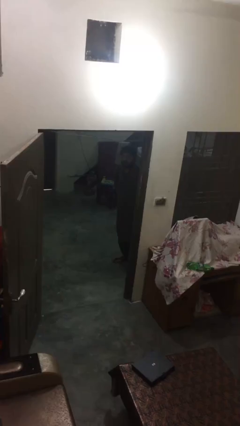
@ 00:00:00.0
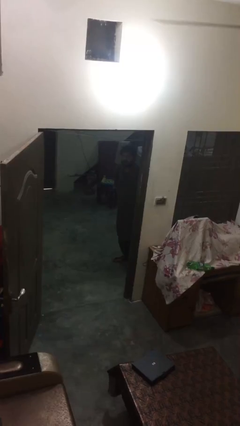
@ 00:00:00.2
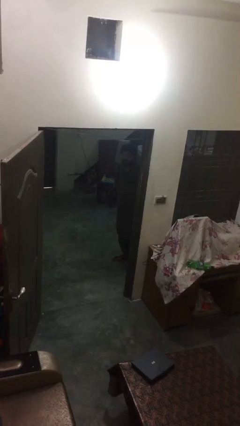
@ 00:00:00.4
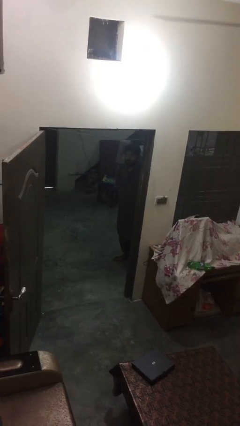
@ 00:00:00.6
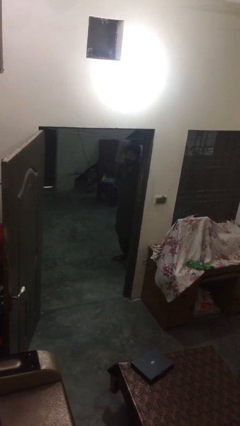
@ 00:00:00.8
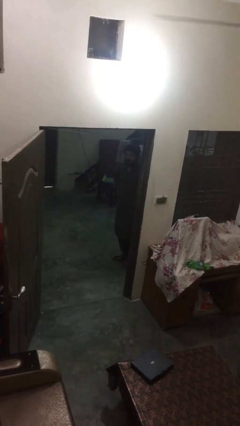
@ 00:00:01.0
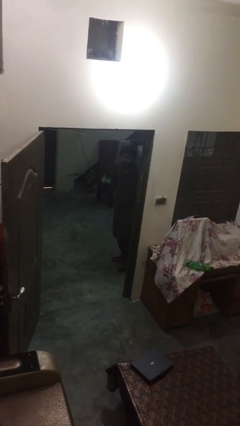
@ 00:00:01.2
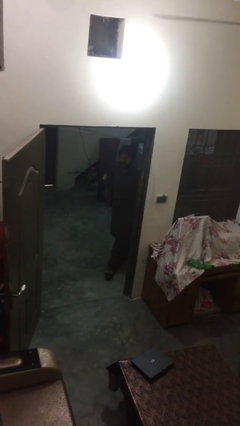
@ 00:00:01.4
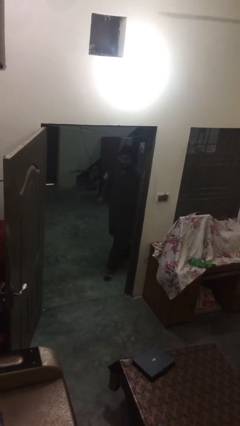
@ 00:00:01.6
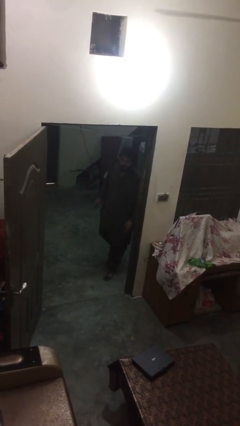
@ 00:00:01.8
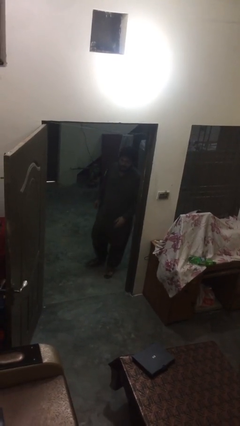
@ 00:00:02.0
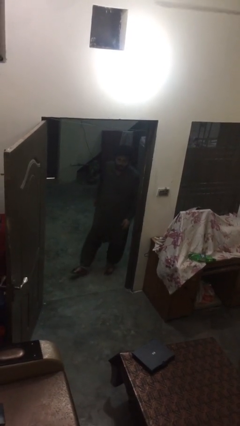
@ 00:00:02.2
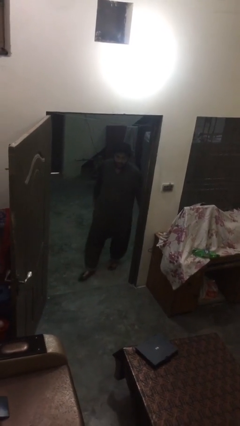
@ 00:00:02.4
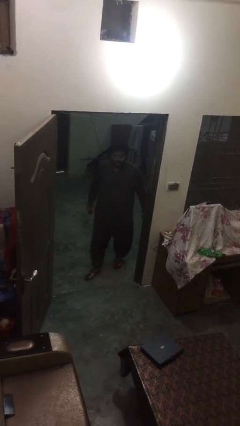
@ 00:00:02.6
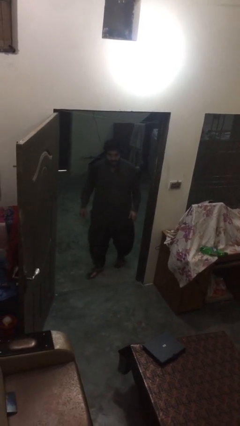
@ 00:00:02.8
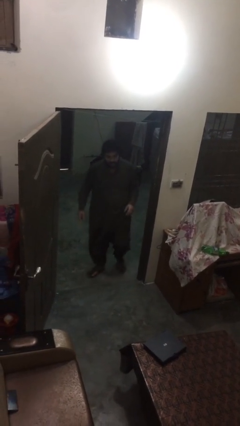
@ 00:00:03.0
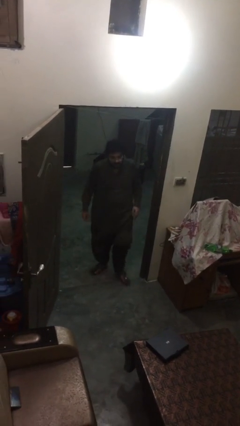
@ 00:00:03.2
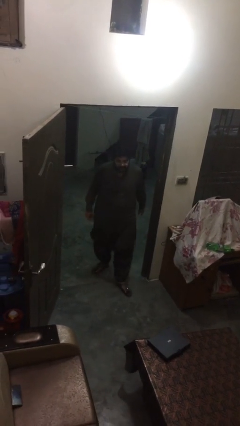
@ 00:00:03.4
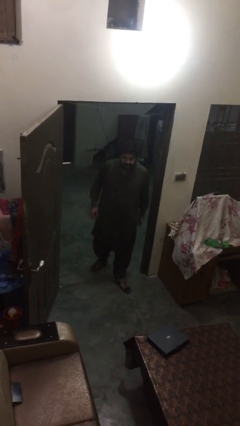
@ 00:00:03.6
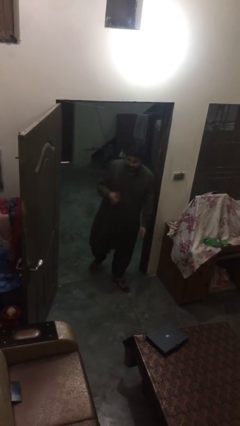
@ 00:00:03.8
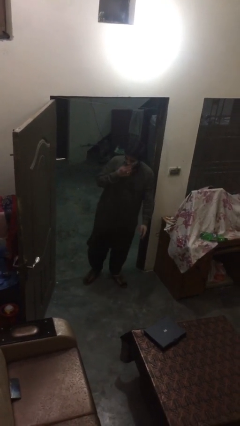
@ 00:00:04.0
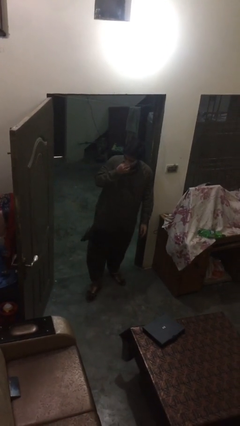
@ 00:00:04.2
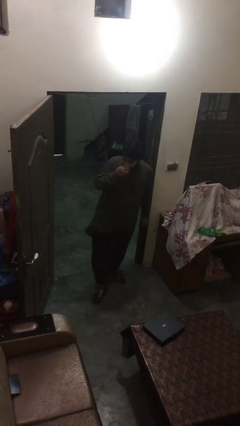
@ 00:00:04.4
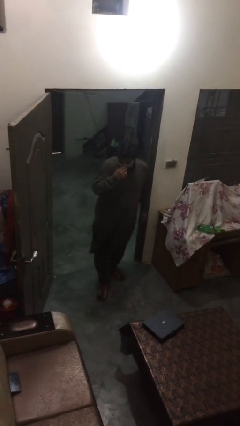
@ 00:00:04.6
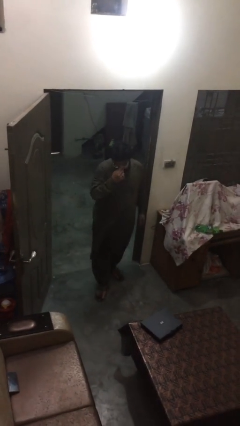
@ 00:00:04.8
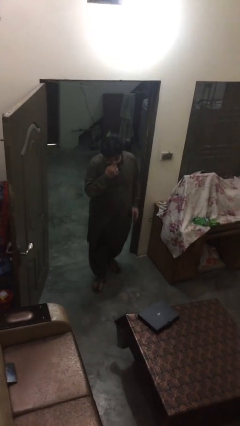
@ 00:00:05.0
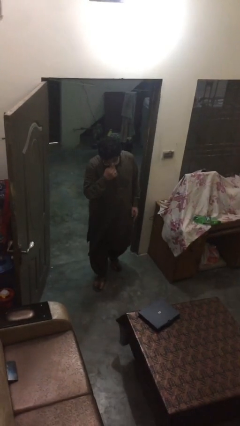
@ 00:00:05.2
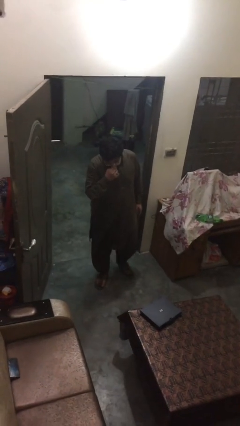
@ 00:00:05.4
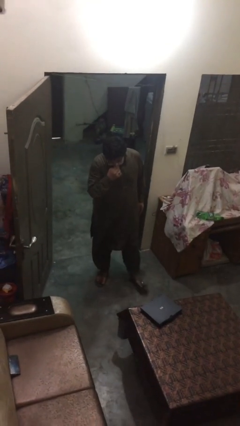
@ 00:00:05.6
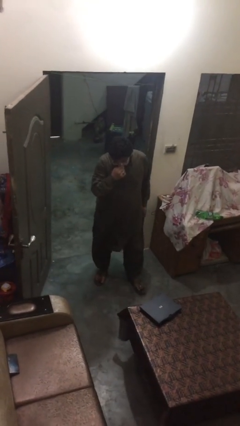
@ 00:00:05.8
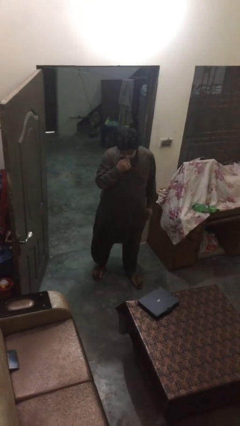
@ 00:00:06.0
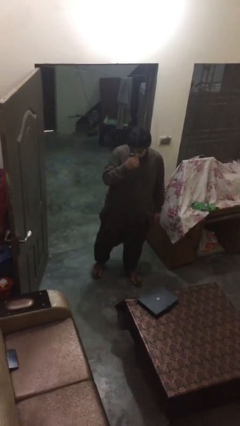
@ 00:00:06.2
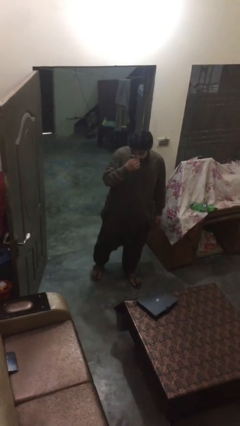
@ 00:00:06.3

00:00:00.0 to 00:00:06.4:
person enters scene through structure

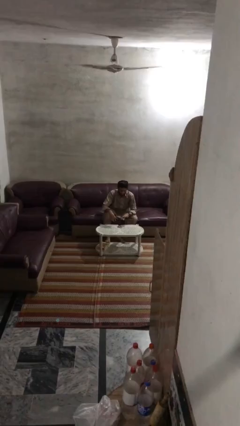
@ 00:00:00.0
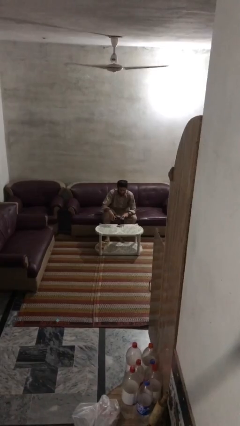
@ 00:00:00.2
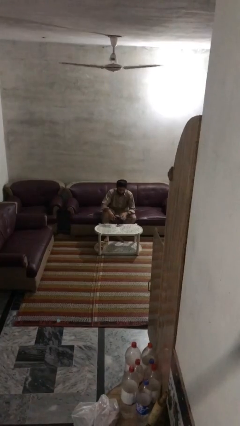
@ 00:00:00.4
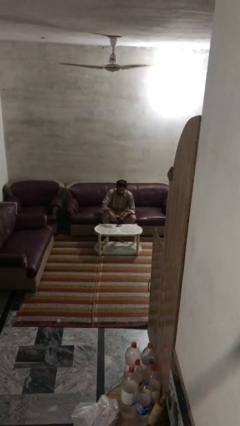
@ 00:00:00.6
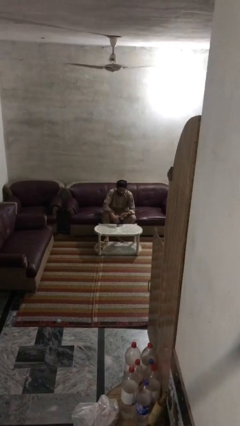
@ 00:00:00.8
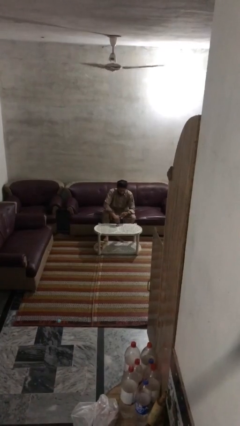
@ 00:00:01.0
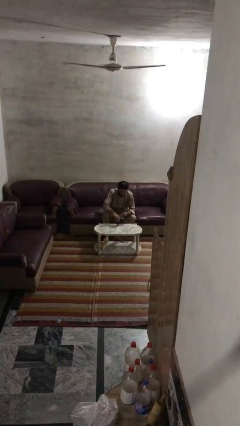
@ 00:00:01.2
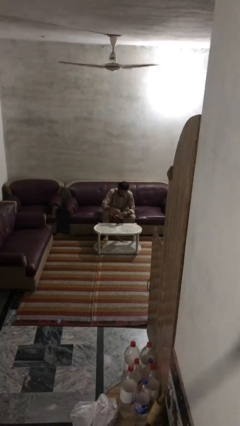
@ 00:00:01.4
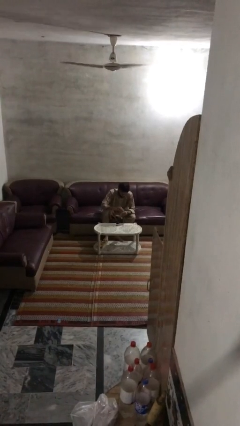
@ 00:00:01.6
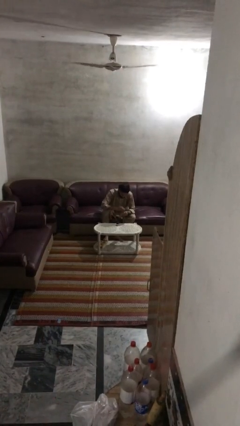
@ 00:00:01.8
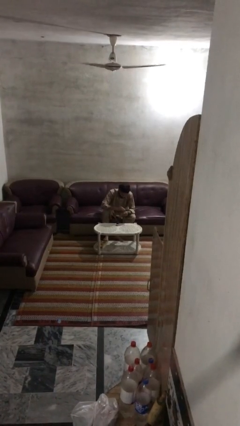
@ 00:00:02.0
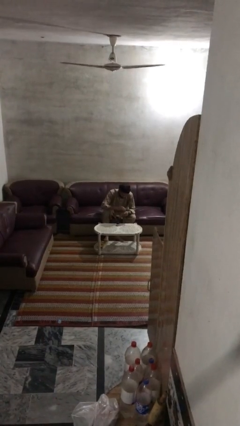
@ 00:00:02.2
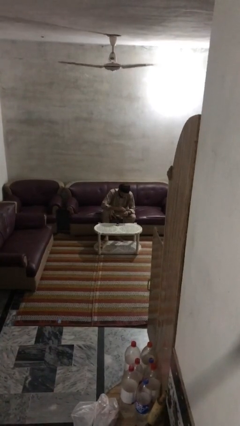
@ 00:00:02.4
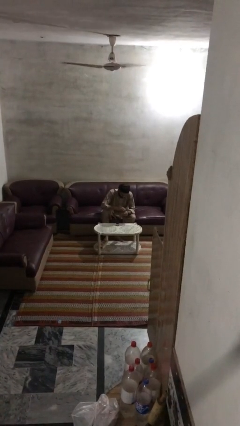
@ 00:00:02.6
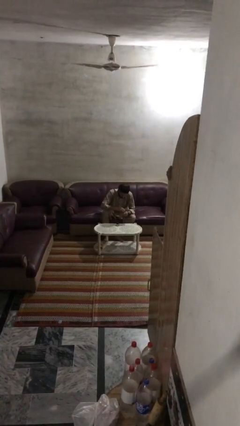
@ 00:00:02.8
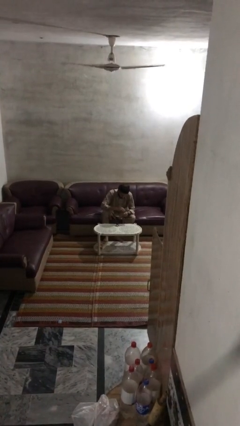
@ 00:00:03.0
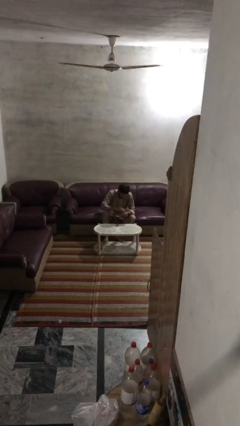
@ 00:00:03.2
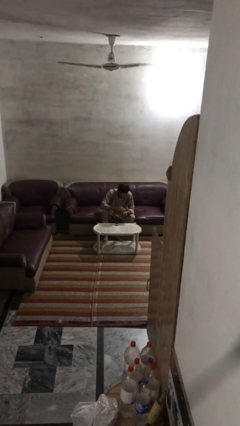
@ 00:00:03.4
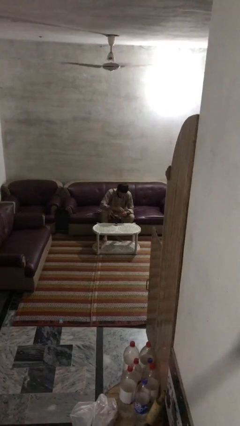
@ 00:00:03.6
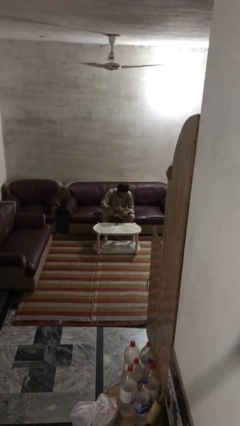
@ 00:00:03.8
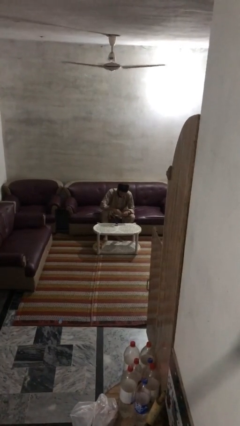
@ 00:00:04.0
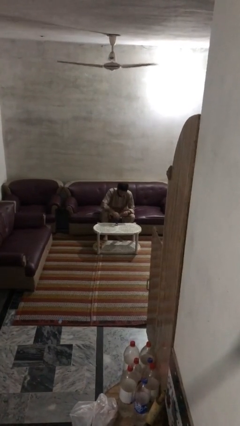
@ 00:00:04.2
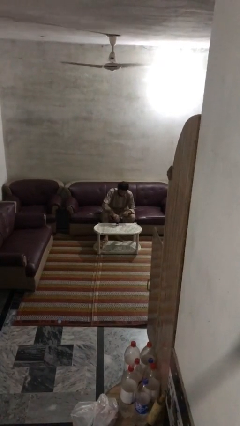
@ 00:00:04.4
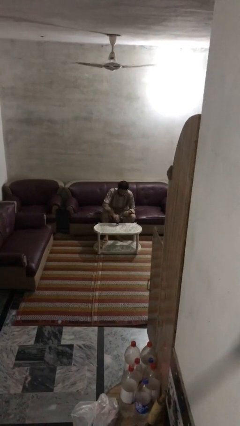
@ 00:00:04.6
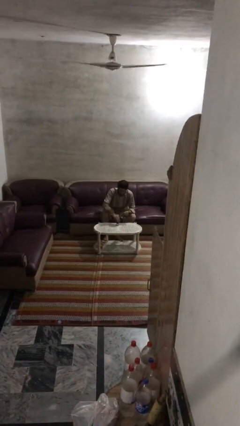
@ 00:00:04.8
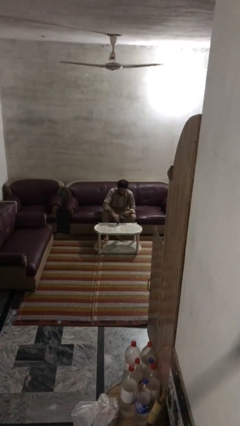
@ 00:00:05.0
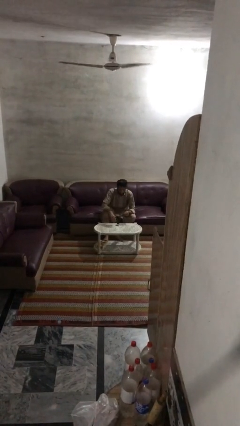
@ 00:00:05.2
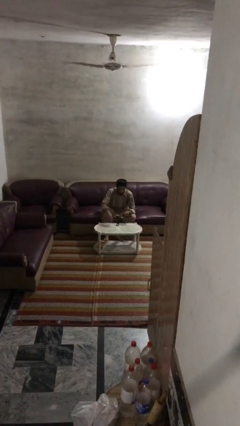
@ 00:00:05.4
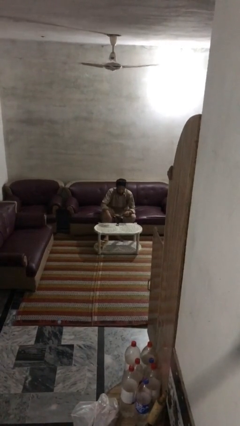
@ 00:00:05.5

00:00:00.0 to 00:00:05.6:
person paints fingernails

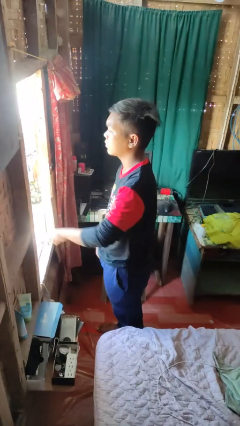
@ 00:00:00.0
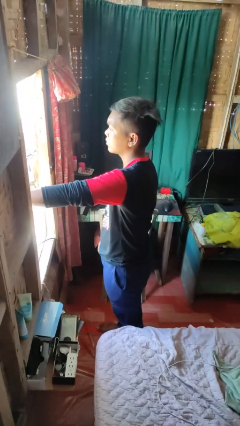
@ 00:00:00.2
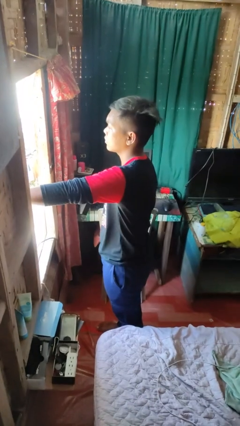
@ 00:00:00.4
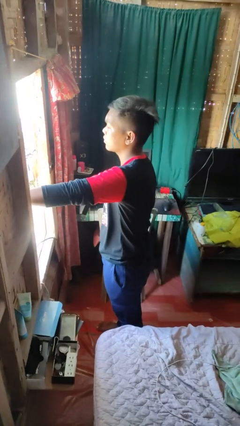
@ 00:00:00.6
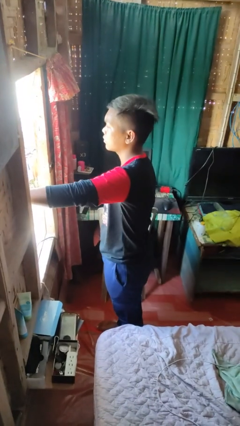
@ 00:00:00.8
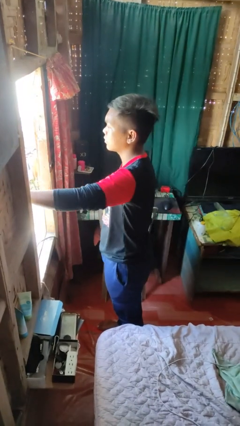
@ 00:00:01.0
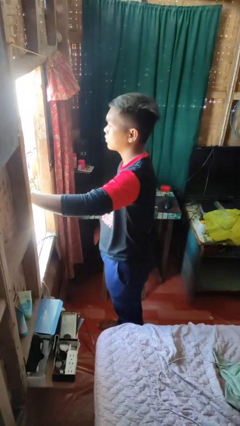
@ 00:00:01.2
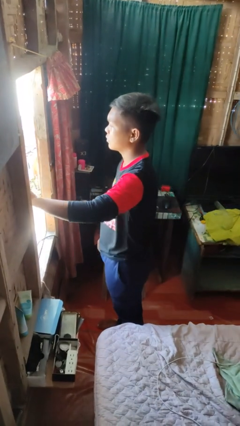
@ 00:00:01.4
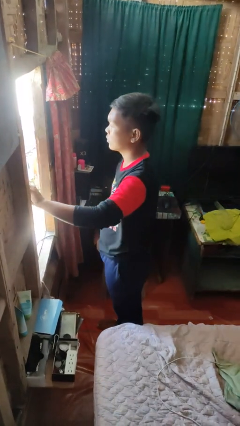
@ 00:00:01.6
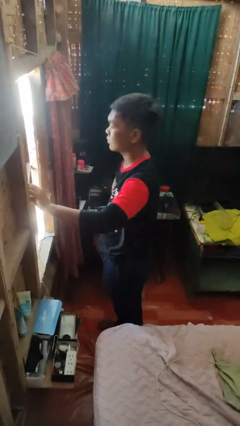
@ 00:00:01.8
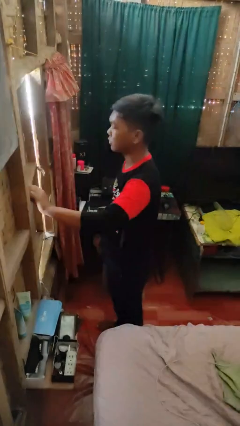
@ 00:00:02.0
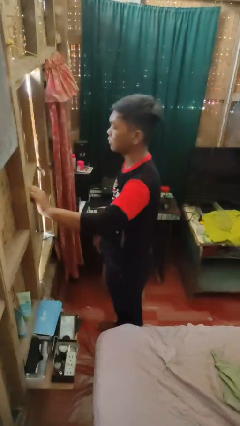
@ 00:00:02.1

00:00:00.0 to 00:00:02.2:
person closes home window

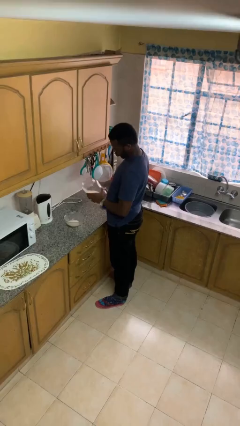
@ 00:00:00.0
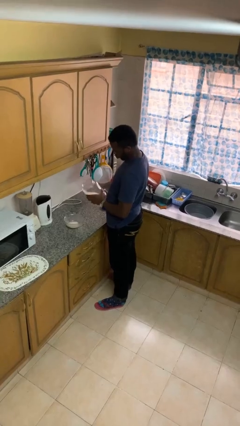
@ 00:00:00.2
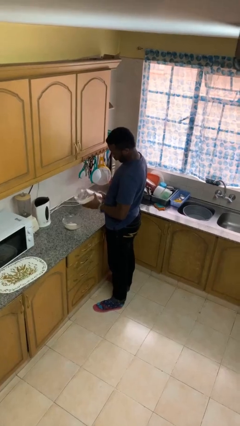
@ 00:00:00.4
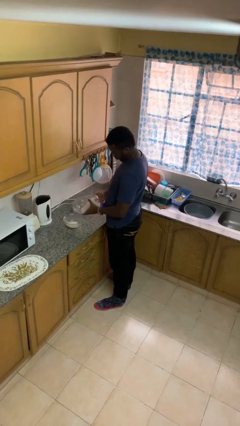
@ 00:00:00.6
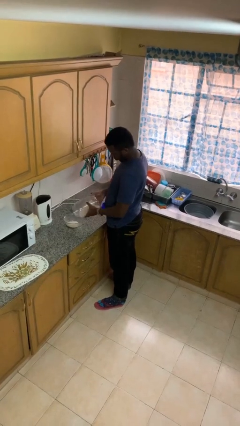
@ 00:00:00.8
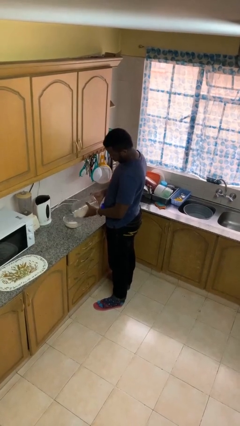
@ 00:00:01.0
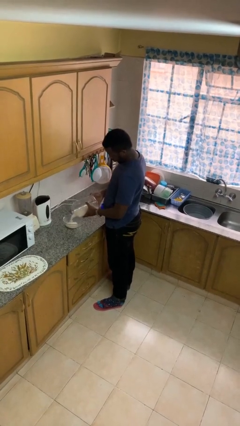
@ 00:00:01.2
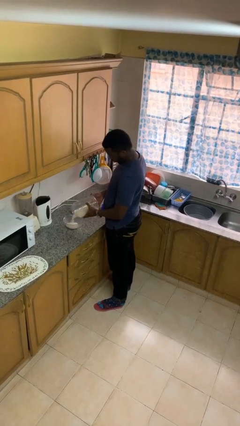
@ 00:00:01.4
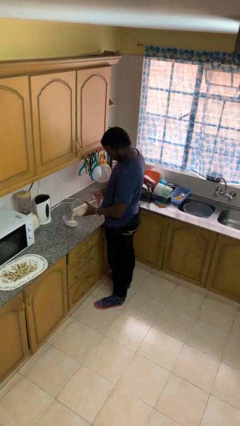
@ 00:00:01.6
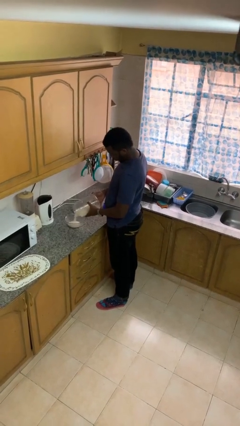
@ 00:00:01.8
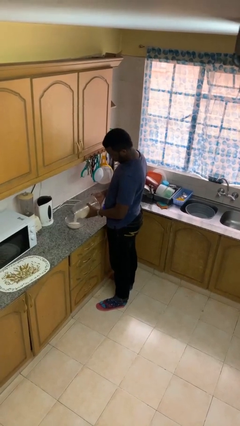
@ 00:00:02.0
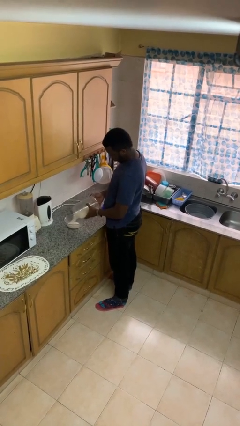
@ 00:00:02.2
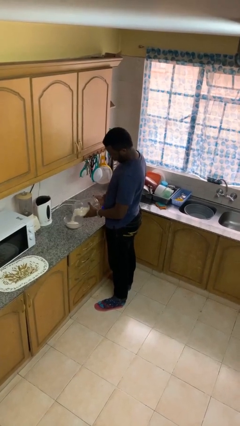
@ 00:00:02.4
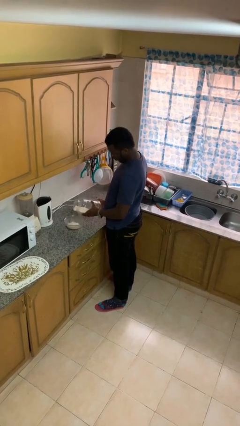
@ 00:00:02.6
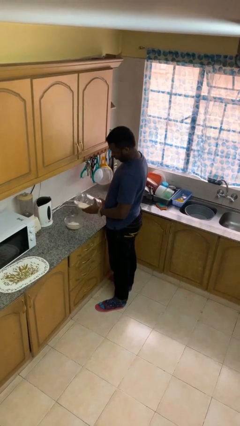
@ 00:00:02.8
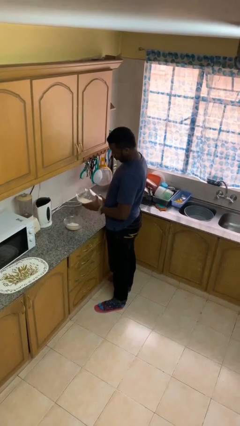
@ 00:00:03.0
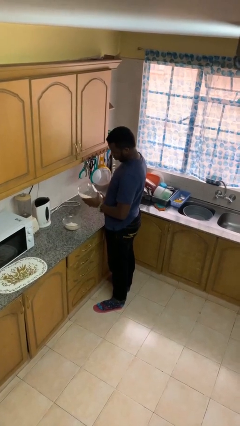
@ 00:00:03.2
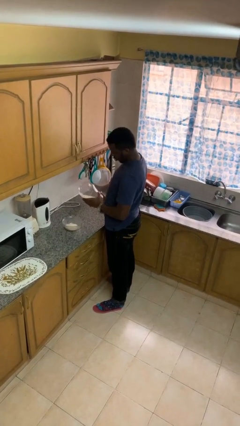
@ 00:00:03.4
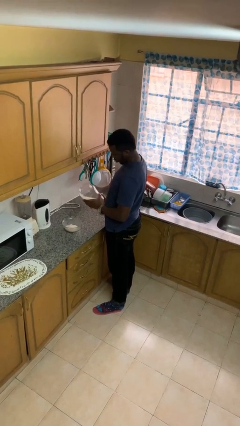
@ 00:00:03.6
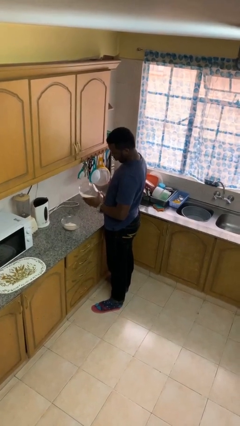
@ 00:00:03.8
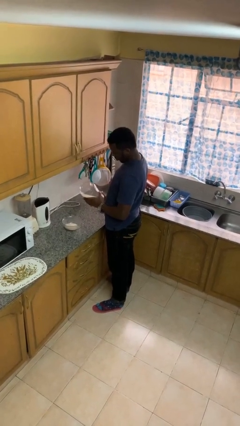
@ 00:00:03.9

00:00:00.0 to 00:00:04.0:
person pours into bowl
